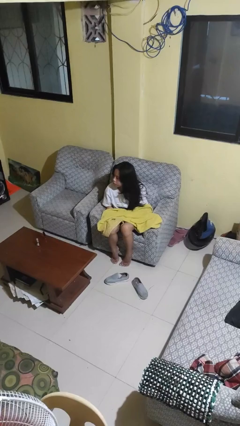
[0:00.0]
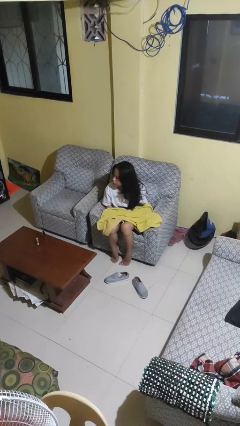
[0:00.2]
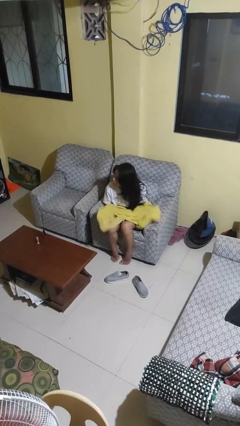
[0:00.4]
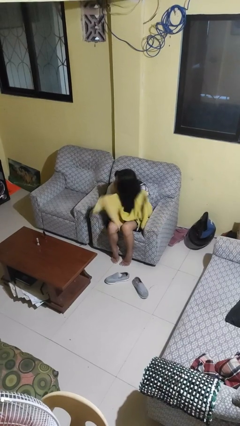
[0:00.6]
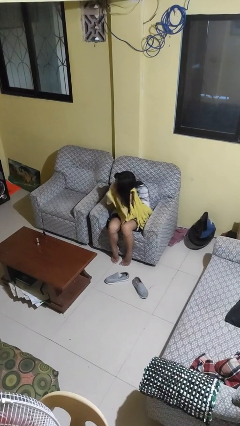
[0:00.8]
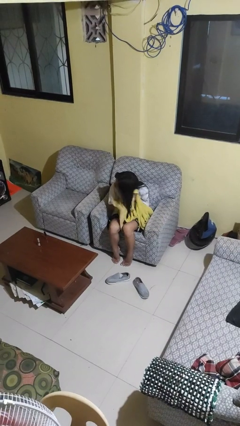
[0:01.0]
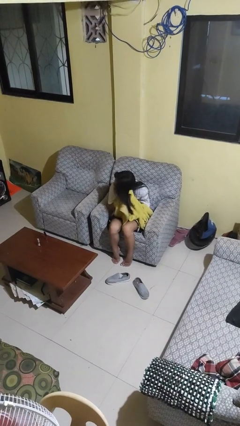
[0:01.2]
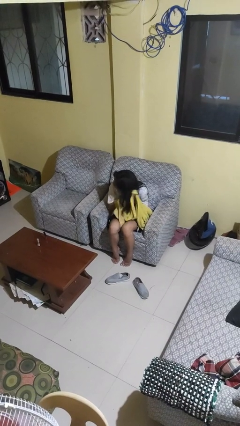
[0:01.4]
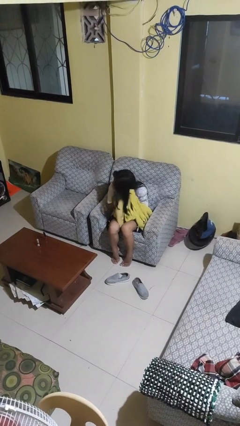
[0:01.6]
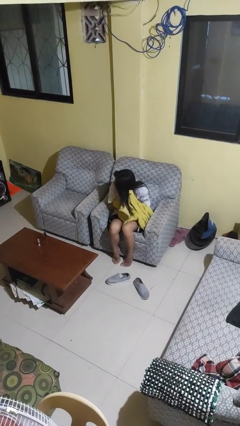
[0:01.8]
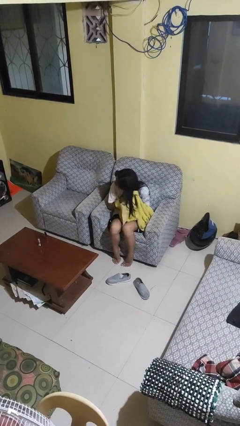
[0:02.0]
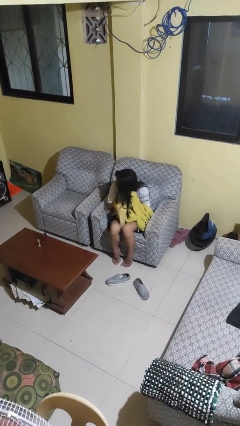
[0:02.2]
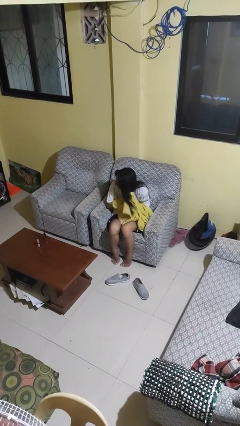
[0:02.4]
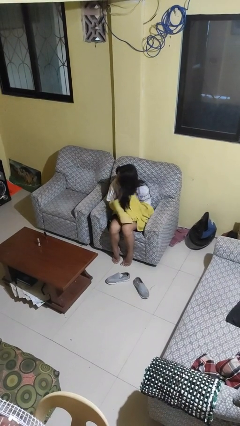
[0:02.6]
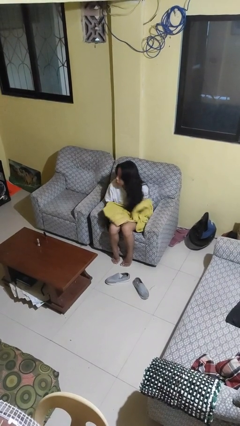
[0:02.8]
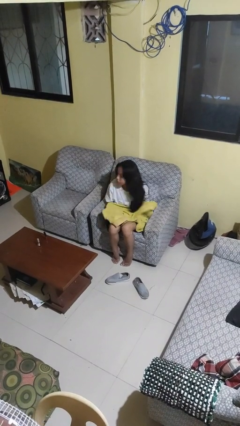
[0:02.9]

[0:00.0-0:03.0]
person dries hair with towel

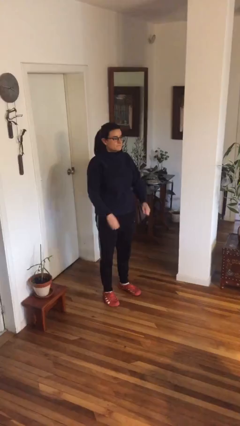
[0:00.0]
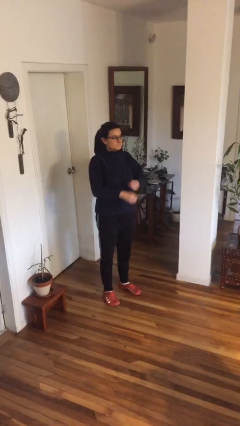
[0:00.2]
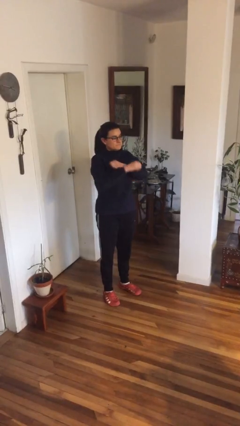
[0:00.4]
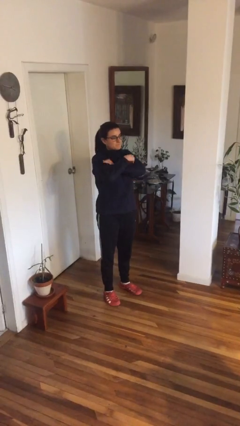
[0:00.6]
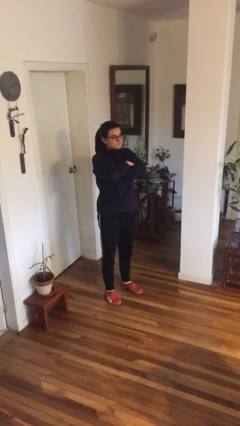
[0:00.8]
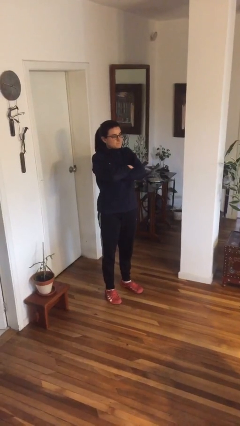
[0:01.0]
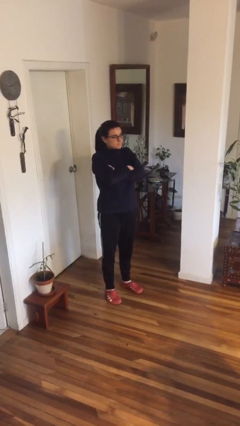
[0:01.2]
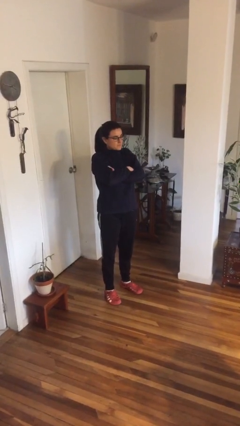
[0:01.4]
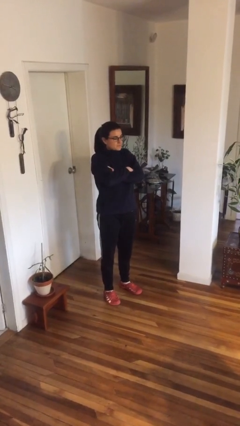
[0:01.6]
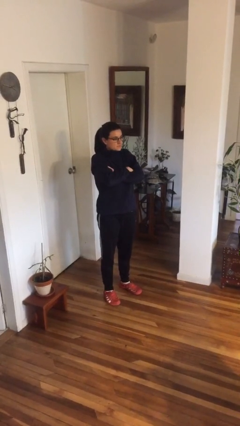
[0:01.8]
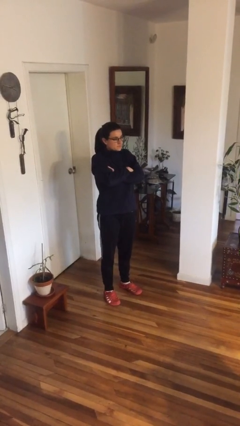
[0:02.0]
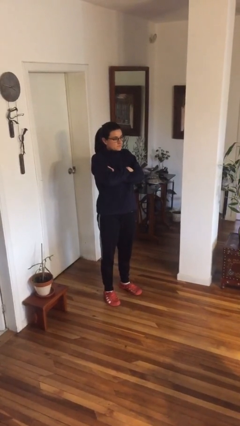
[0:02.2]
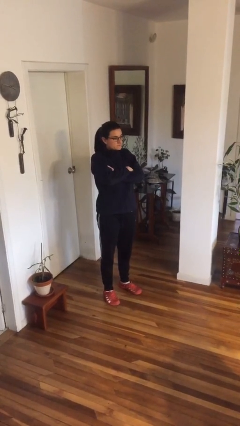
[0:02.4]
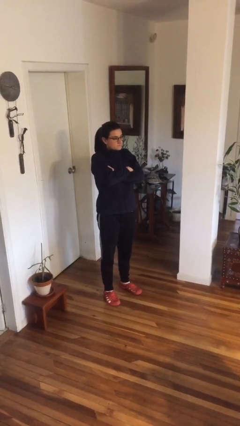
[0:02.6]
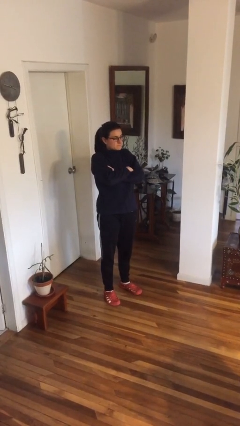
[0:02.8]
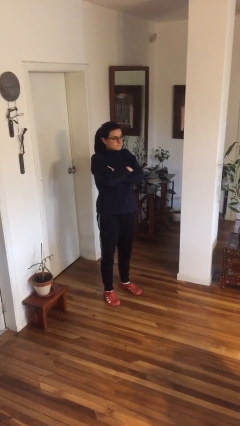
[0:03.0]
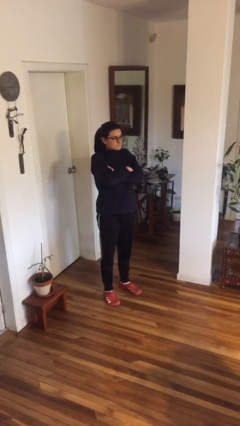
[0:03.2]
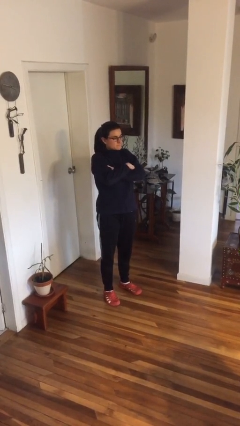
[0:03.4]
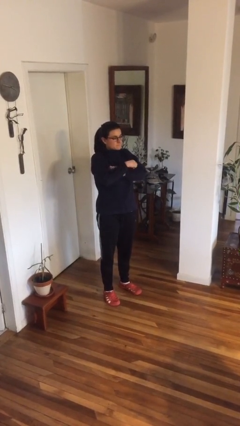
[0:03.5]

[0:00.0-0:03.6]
person crosses arms

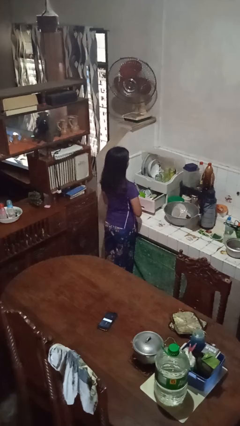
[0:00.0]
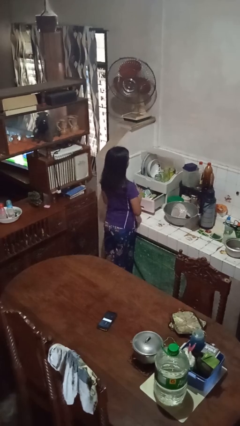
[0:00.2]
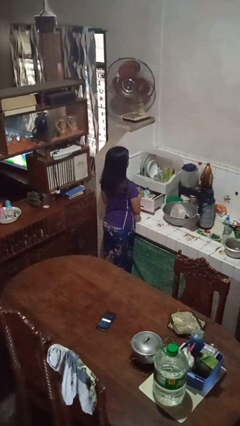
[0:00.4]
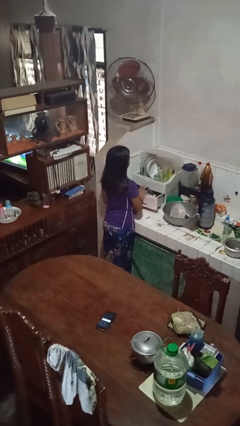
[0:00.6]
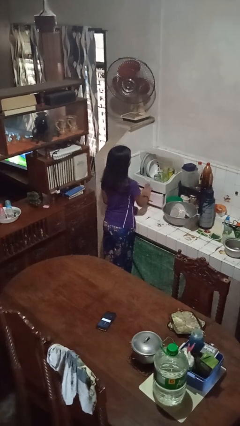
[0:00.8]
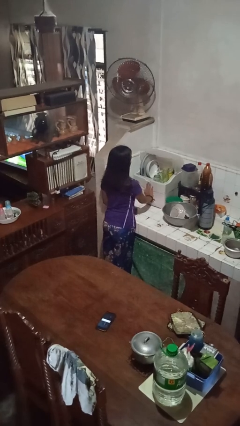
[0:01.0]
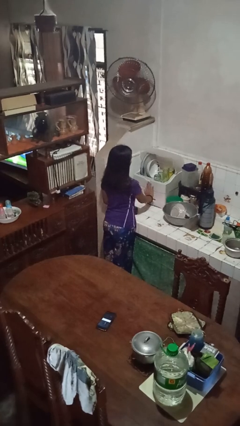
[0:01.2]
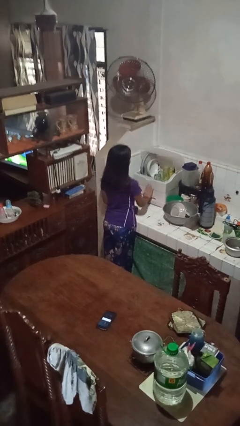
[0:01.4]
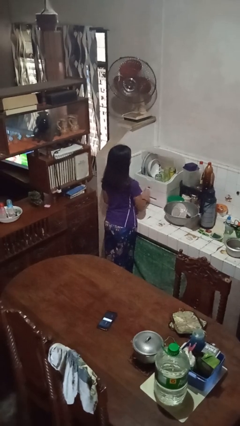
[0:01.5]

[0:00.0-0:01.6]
person closes kitchen drawer

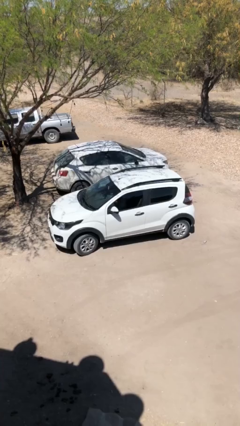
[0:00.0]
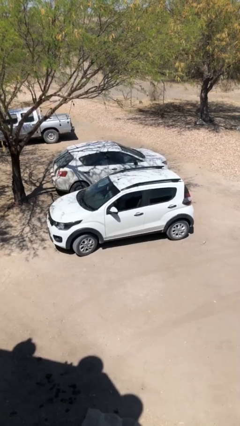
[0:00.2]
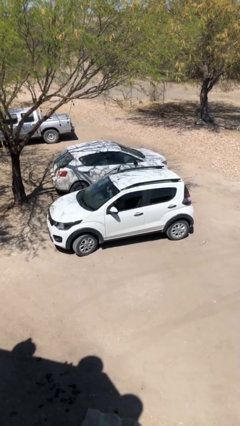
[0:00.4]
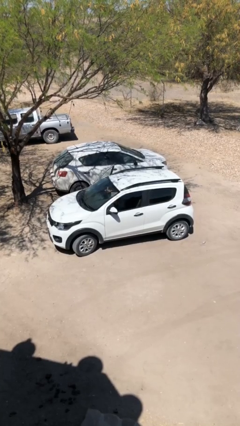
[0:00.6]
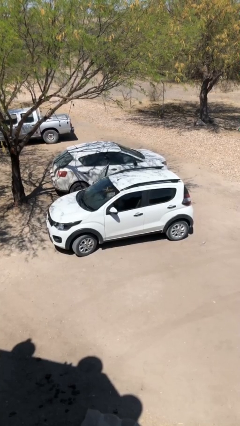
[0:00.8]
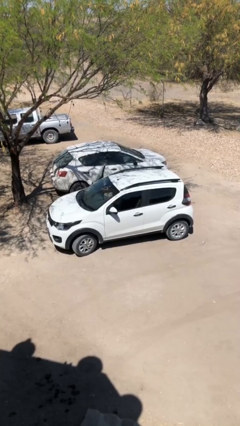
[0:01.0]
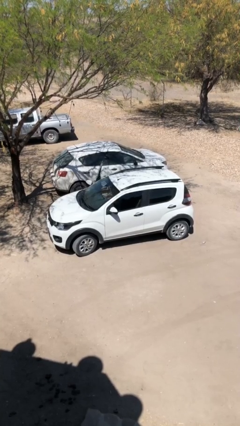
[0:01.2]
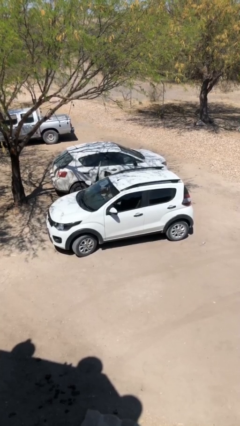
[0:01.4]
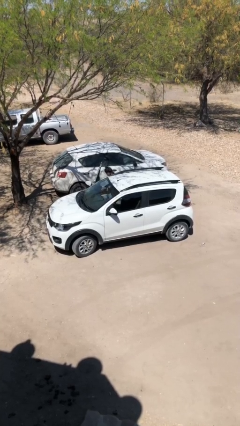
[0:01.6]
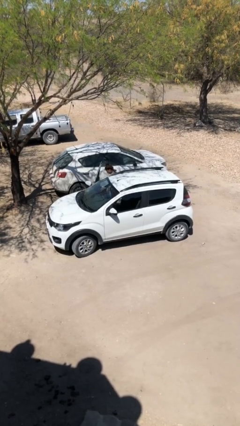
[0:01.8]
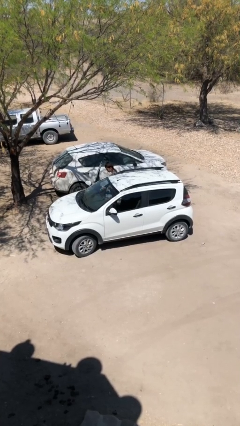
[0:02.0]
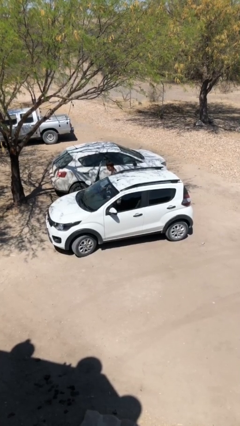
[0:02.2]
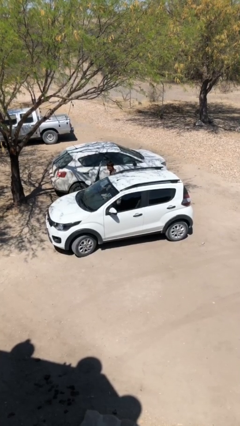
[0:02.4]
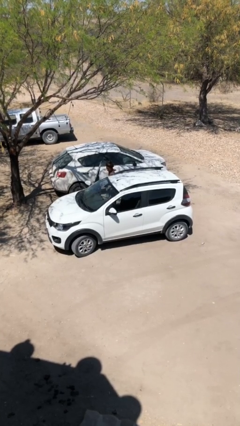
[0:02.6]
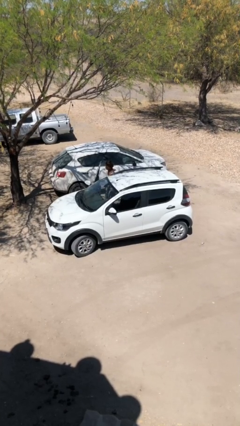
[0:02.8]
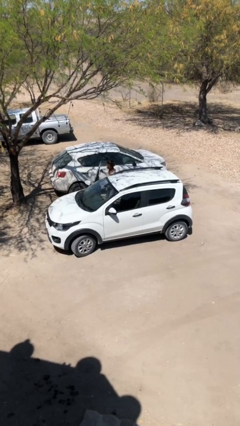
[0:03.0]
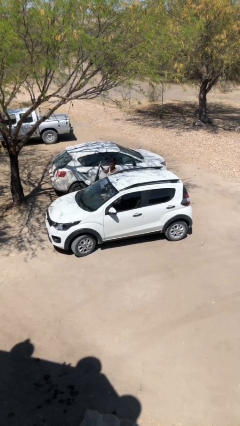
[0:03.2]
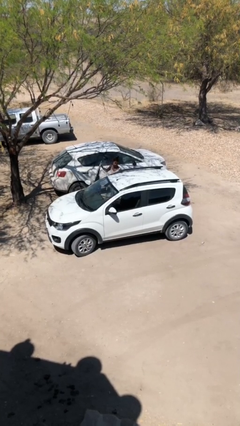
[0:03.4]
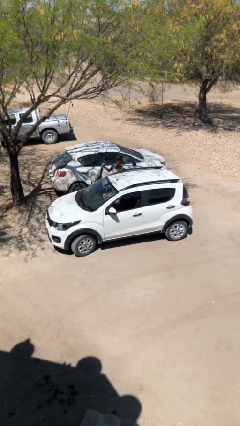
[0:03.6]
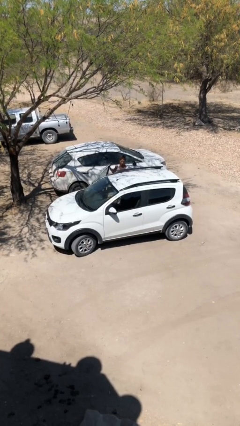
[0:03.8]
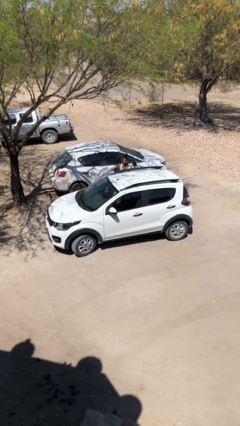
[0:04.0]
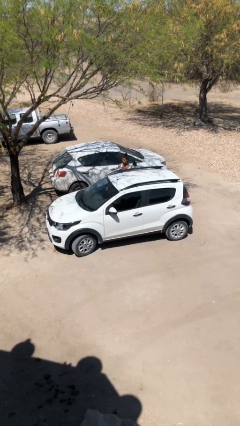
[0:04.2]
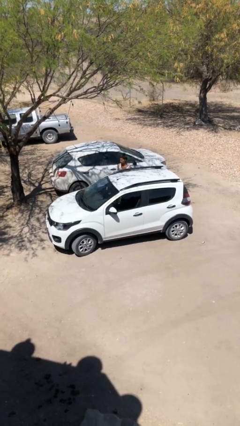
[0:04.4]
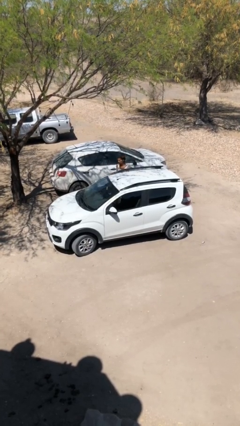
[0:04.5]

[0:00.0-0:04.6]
car drops off person

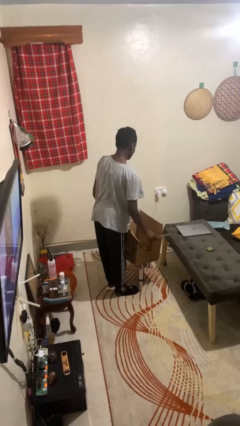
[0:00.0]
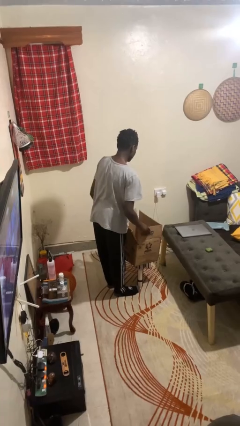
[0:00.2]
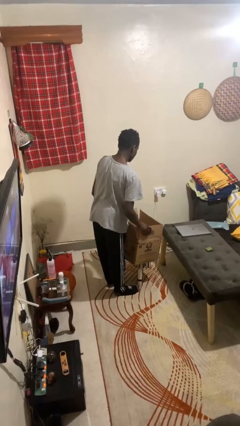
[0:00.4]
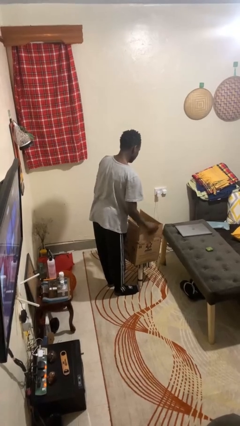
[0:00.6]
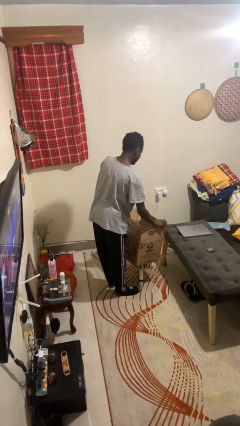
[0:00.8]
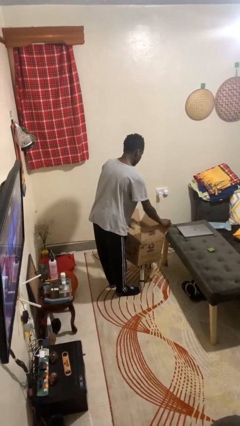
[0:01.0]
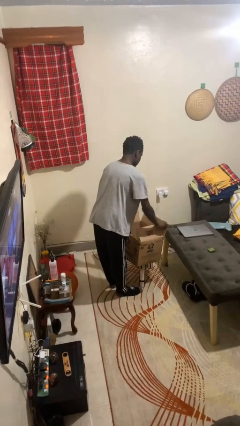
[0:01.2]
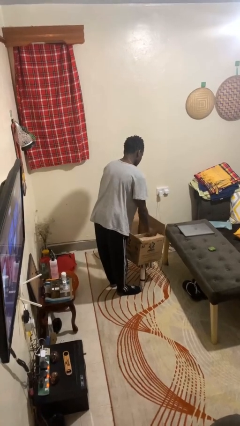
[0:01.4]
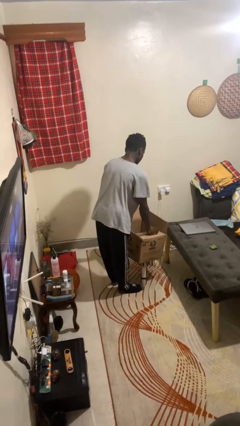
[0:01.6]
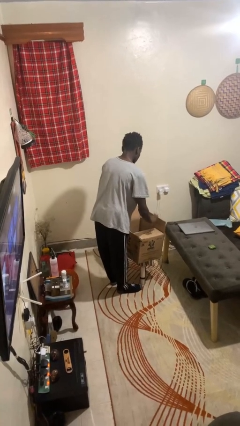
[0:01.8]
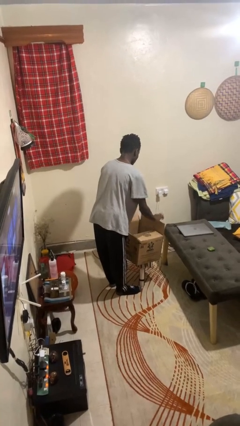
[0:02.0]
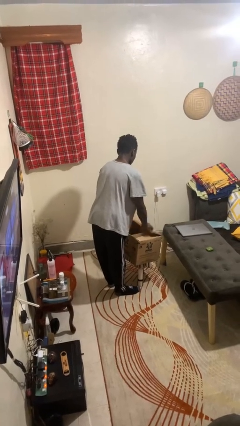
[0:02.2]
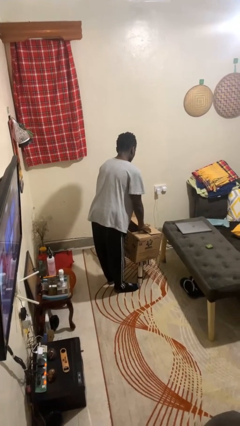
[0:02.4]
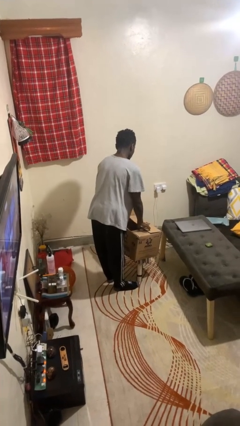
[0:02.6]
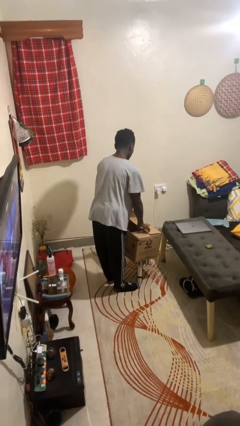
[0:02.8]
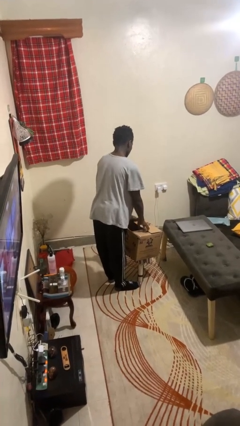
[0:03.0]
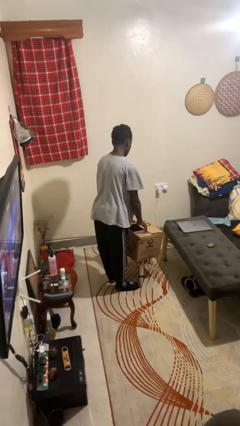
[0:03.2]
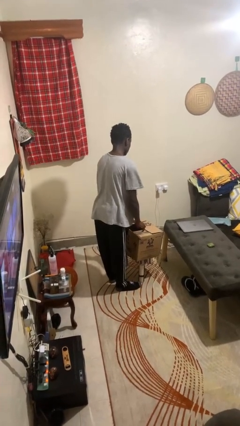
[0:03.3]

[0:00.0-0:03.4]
person closes box

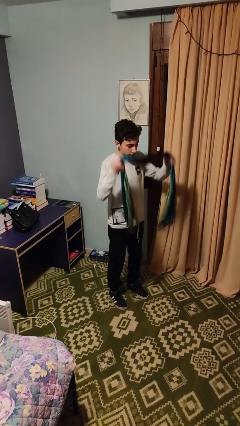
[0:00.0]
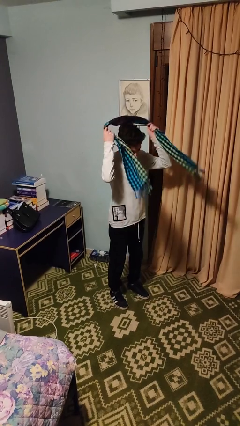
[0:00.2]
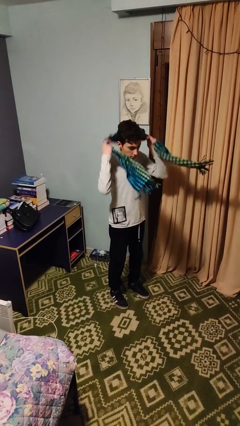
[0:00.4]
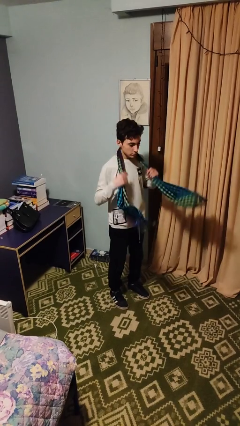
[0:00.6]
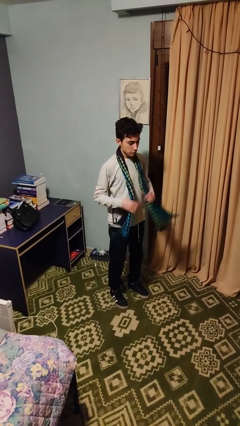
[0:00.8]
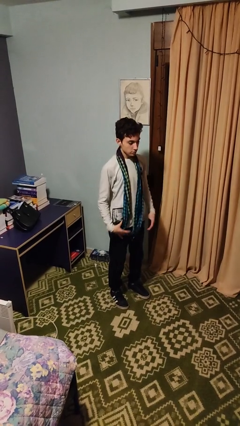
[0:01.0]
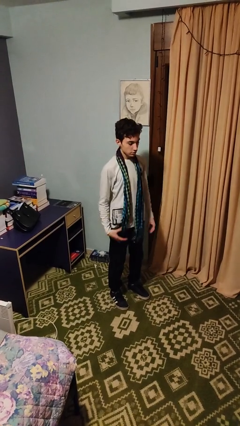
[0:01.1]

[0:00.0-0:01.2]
person puts on scarf

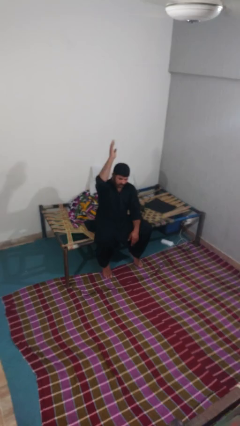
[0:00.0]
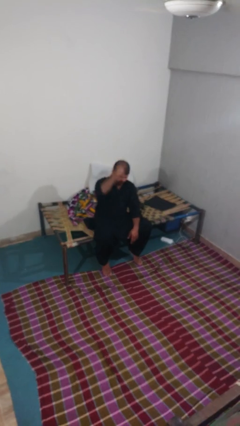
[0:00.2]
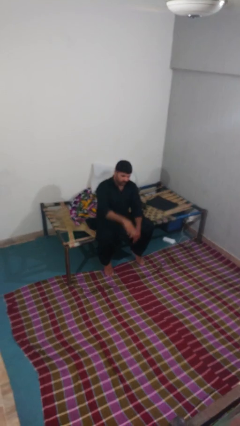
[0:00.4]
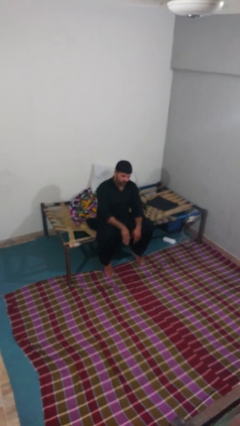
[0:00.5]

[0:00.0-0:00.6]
person gestures swipe down
